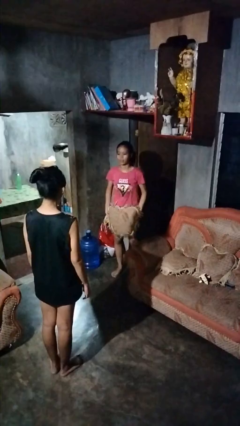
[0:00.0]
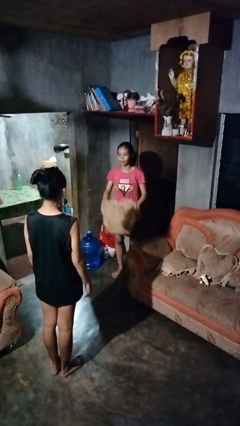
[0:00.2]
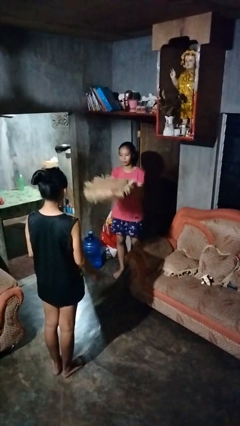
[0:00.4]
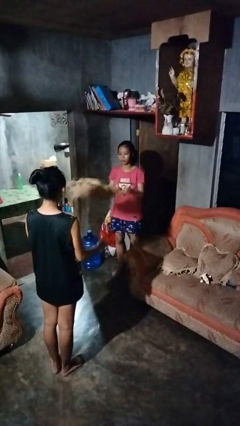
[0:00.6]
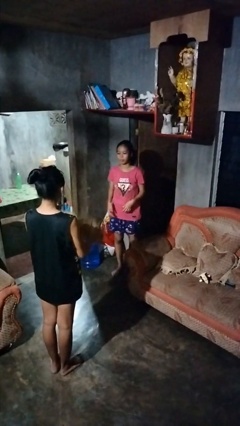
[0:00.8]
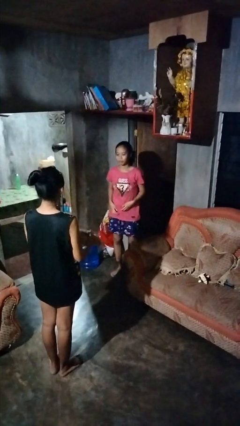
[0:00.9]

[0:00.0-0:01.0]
person throws object to person

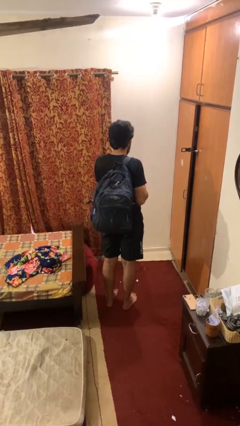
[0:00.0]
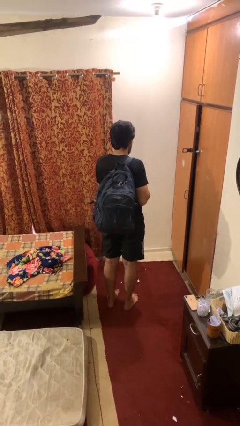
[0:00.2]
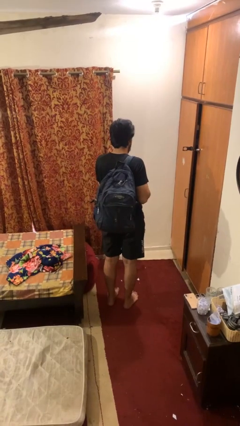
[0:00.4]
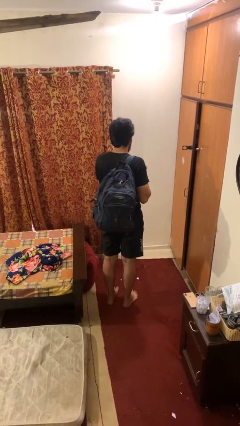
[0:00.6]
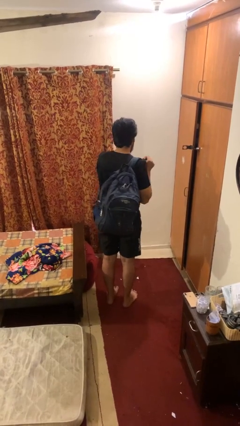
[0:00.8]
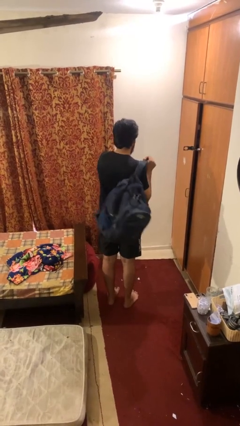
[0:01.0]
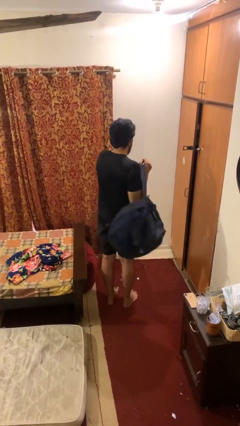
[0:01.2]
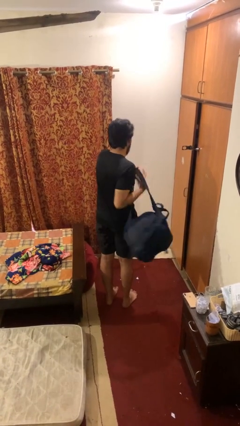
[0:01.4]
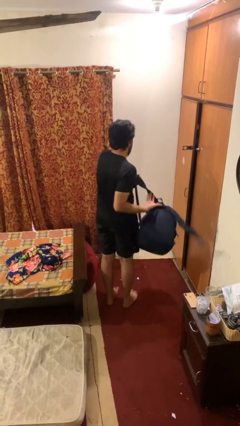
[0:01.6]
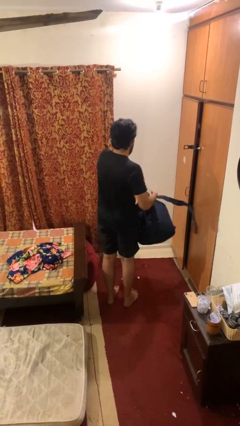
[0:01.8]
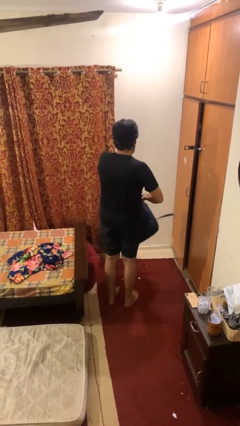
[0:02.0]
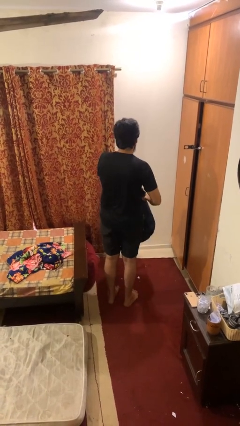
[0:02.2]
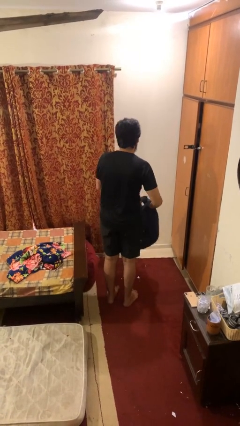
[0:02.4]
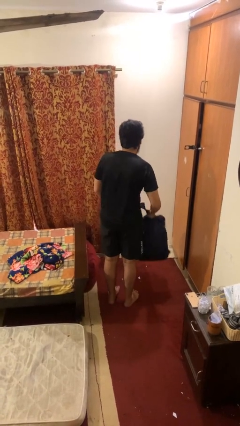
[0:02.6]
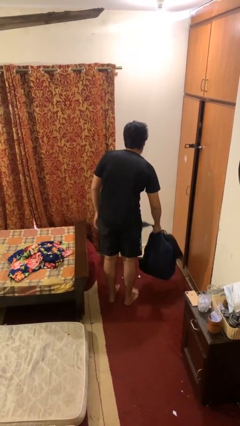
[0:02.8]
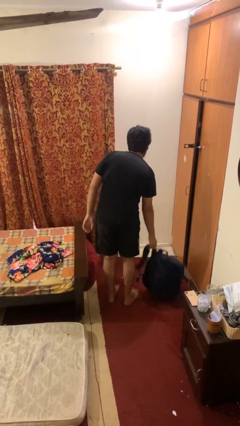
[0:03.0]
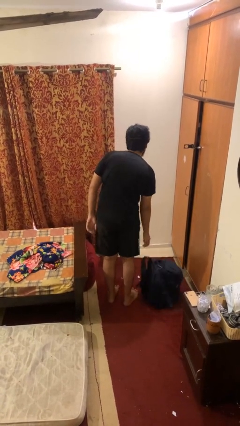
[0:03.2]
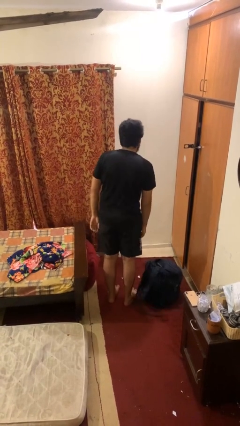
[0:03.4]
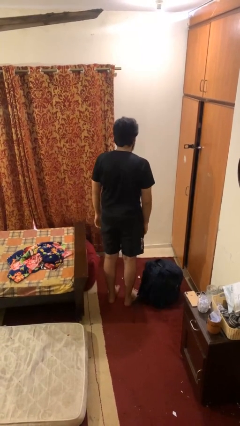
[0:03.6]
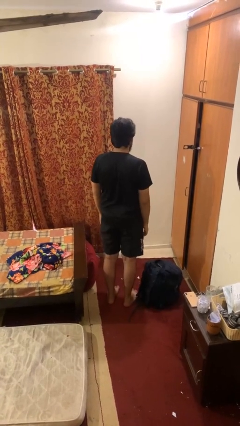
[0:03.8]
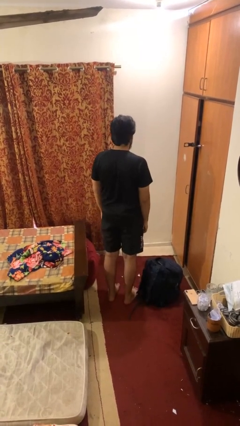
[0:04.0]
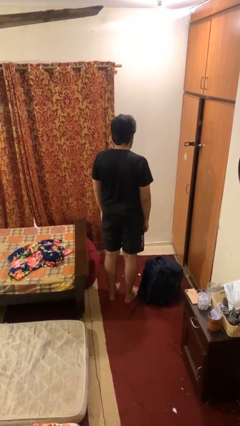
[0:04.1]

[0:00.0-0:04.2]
person takes off backpack

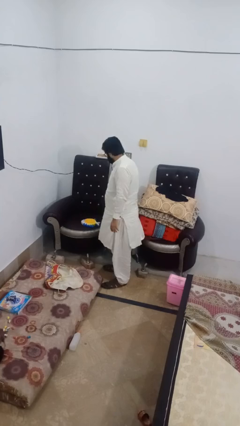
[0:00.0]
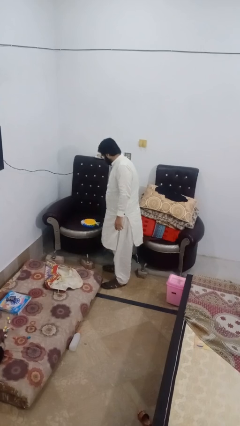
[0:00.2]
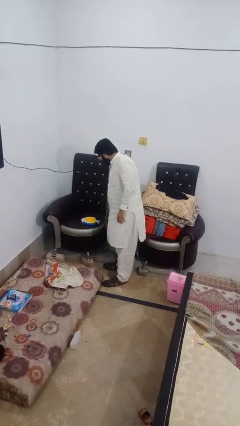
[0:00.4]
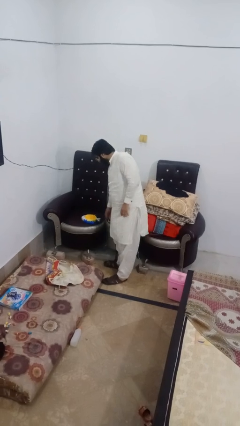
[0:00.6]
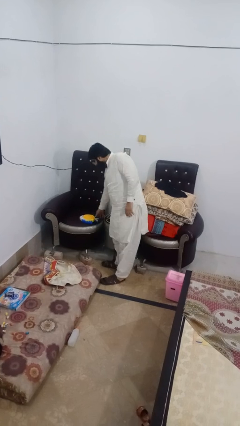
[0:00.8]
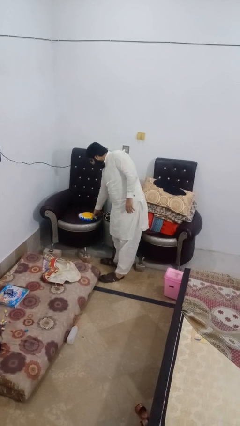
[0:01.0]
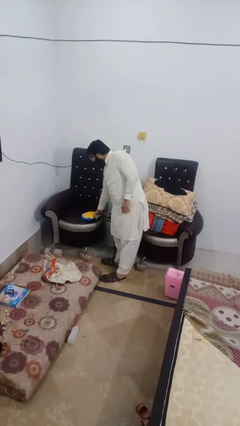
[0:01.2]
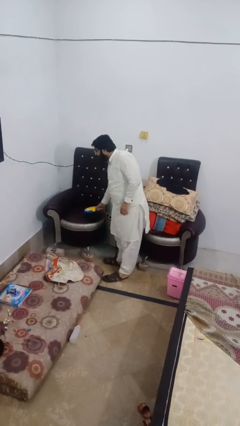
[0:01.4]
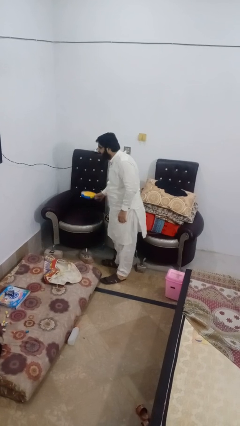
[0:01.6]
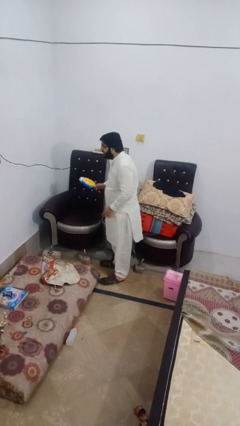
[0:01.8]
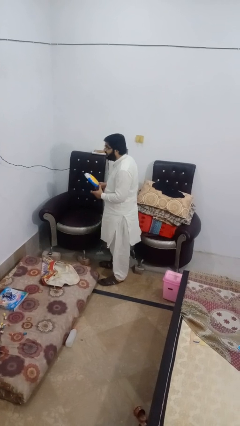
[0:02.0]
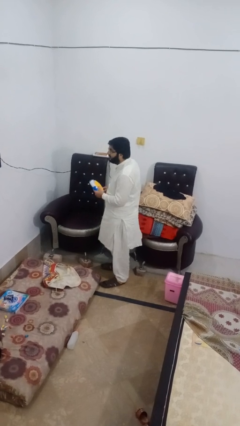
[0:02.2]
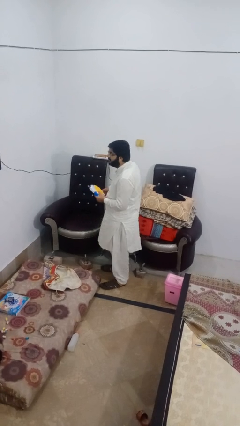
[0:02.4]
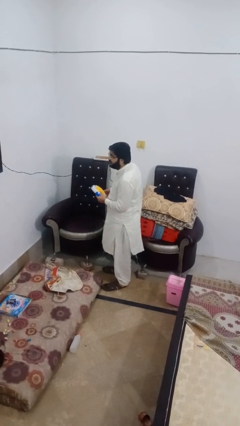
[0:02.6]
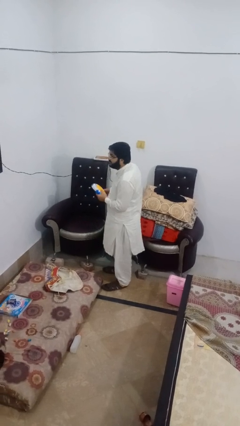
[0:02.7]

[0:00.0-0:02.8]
person picks up object from couch

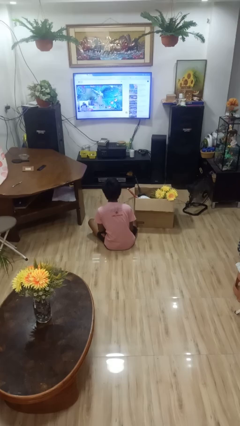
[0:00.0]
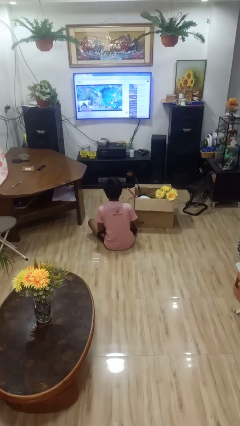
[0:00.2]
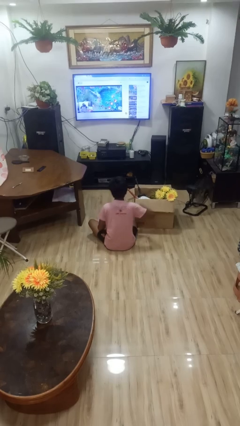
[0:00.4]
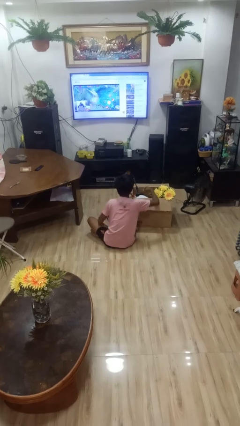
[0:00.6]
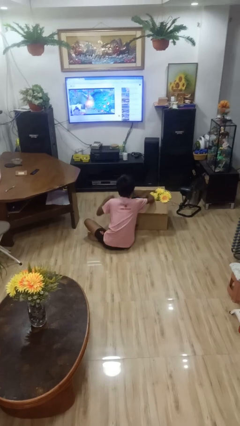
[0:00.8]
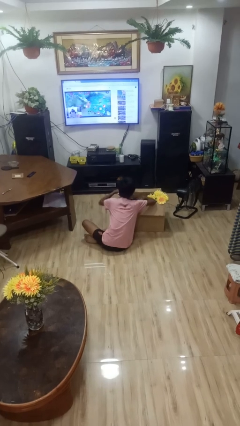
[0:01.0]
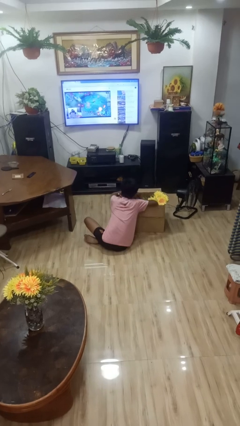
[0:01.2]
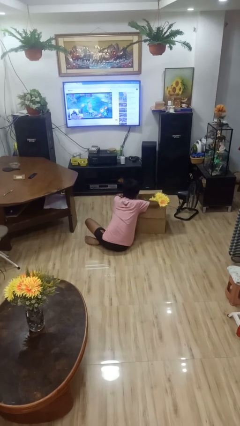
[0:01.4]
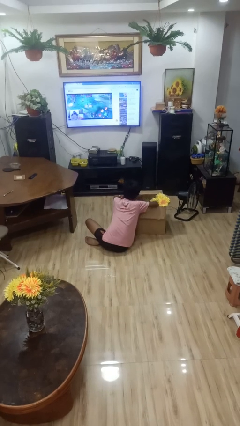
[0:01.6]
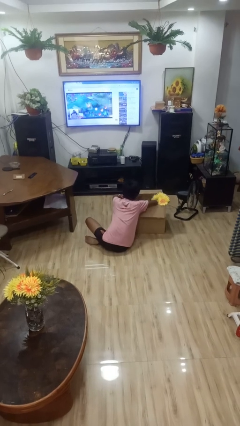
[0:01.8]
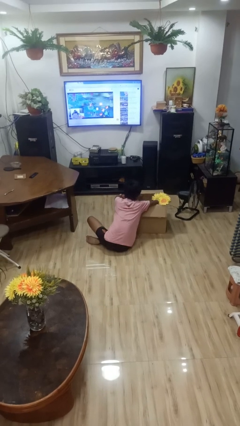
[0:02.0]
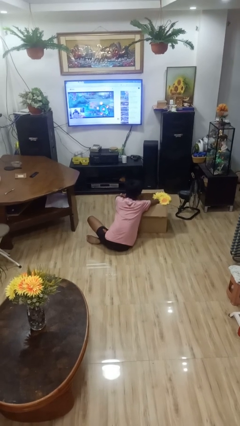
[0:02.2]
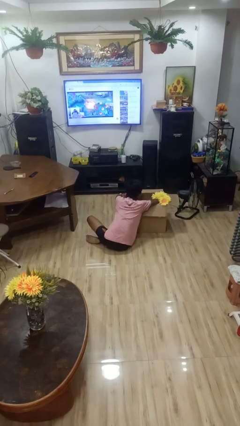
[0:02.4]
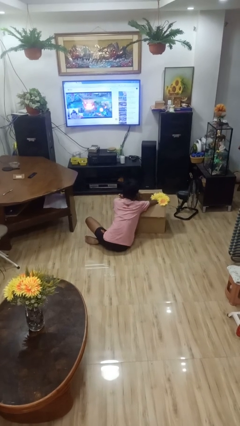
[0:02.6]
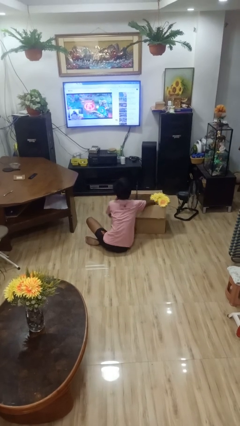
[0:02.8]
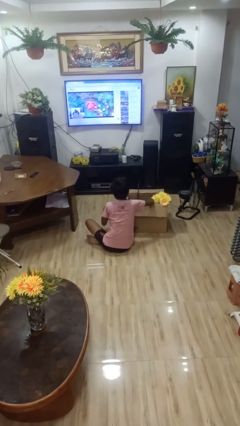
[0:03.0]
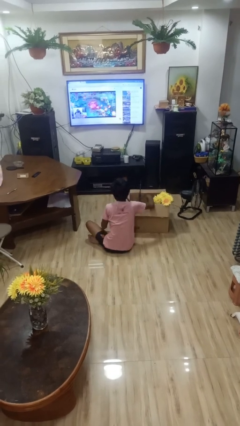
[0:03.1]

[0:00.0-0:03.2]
person searches in box

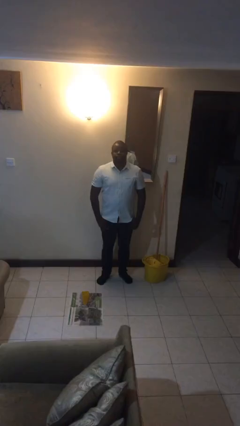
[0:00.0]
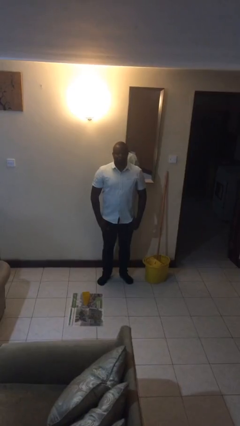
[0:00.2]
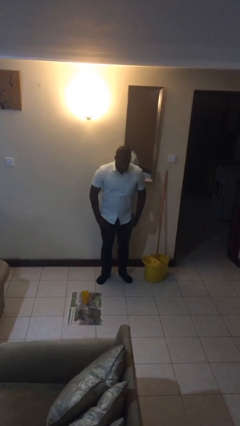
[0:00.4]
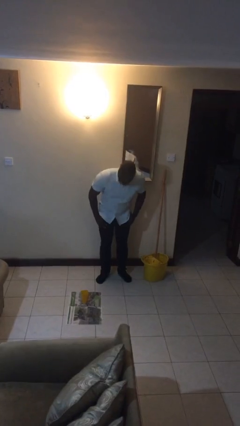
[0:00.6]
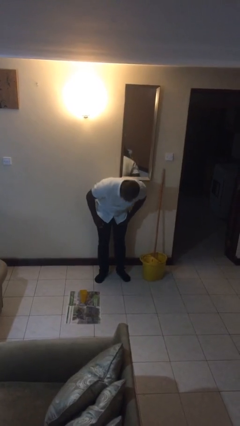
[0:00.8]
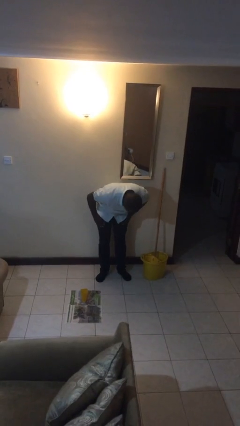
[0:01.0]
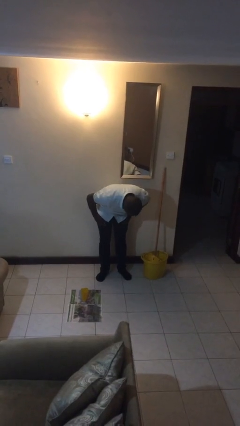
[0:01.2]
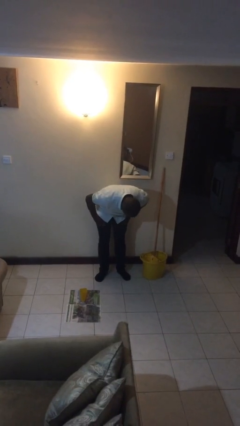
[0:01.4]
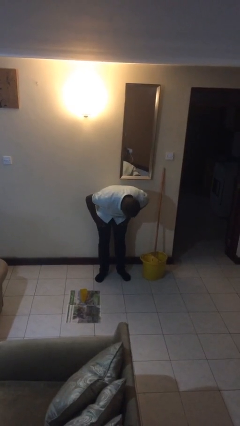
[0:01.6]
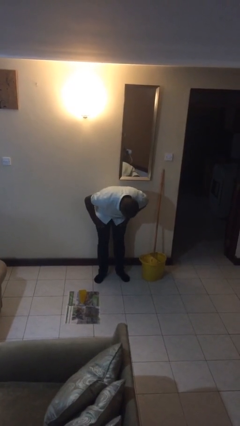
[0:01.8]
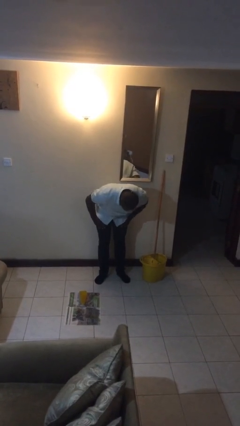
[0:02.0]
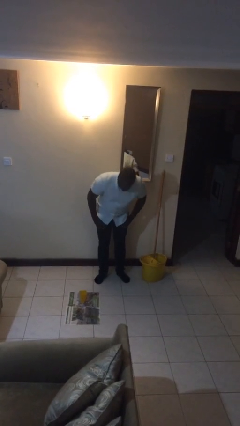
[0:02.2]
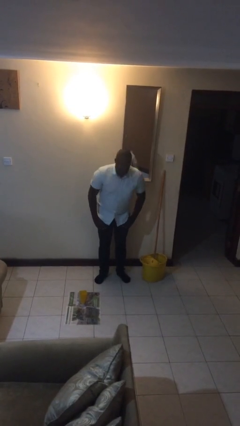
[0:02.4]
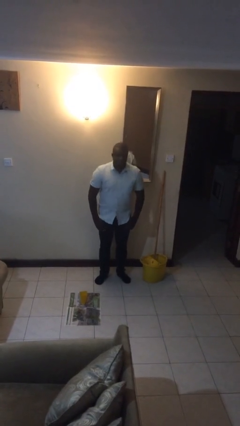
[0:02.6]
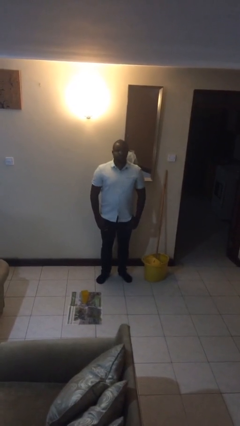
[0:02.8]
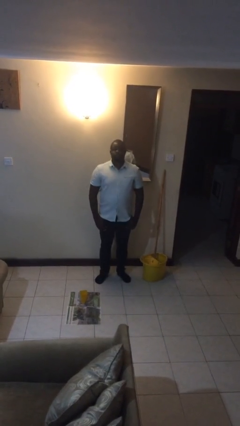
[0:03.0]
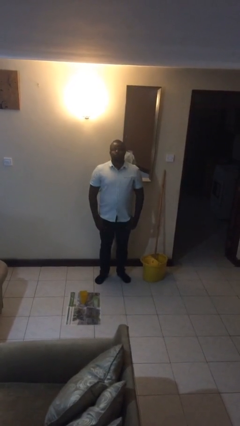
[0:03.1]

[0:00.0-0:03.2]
person bows

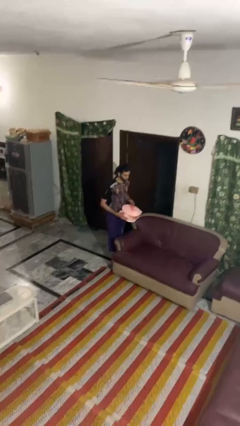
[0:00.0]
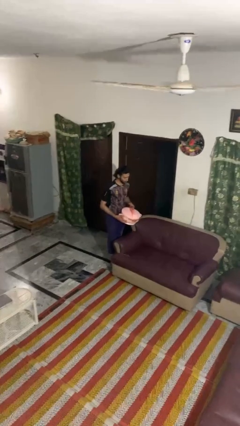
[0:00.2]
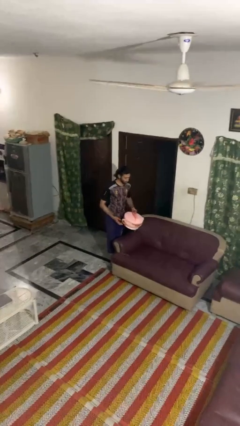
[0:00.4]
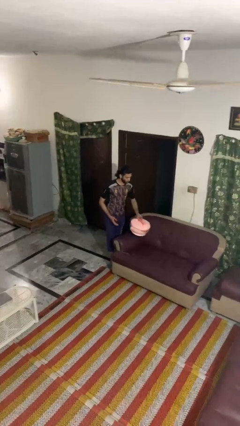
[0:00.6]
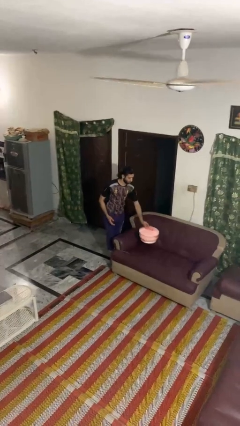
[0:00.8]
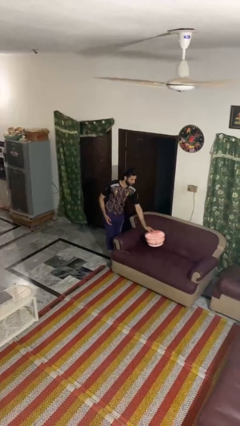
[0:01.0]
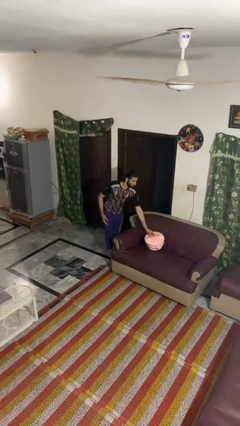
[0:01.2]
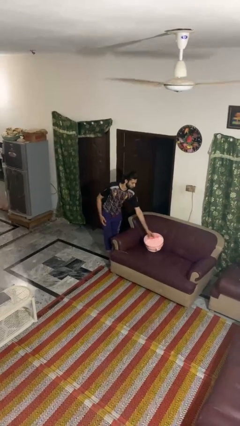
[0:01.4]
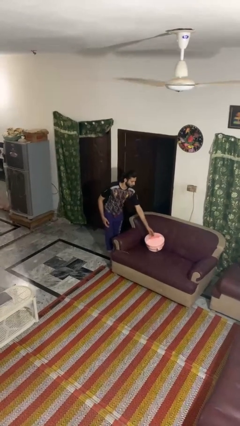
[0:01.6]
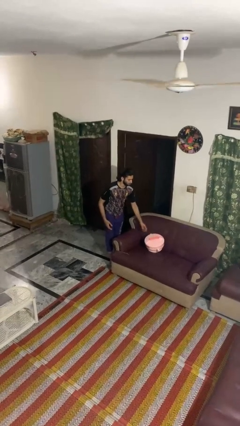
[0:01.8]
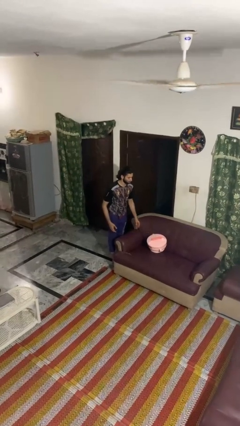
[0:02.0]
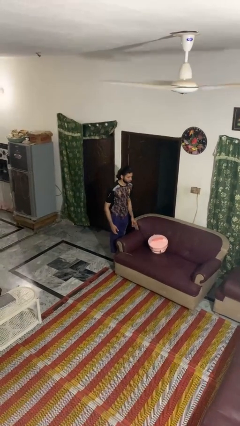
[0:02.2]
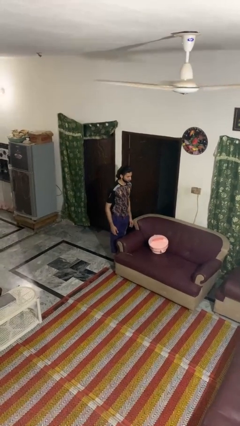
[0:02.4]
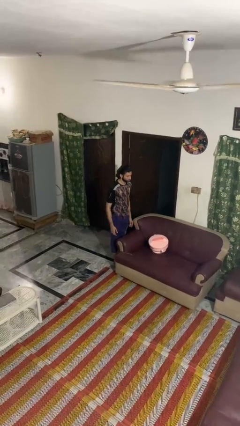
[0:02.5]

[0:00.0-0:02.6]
person puts down object on couch

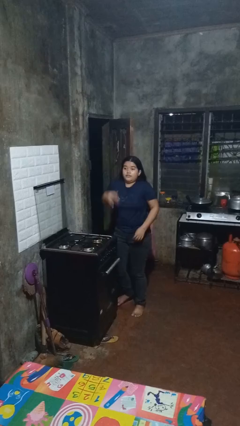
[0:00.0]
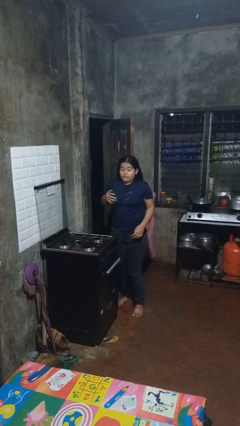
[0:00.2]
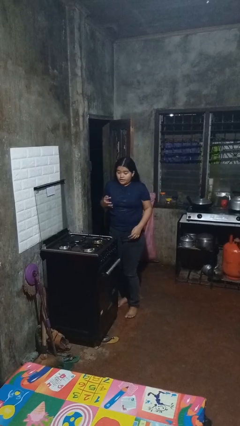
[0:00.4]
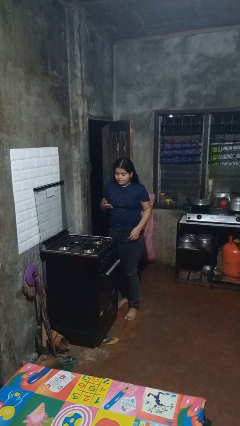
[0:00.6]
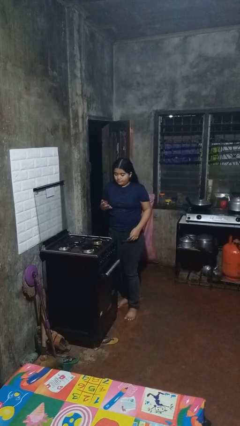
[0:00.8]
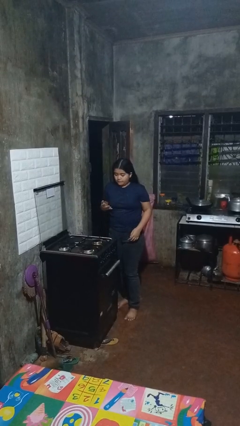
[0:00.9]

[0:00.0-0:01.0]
person burns hand
